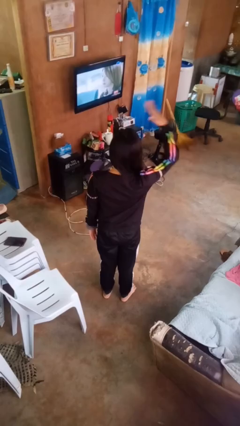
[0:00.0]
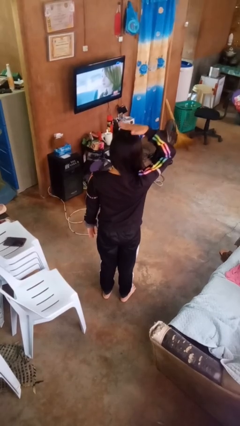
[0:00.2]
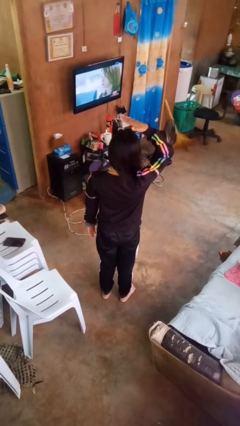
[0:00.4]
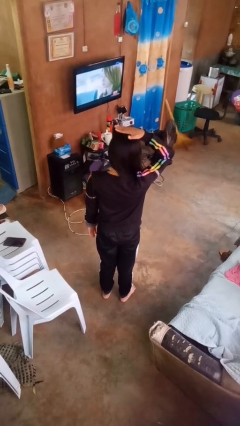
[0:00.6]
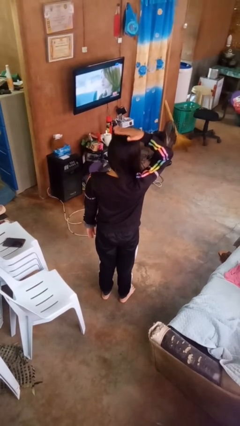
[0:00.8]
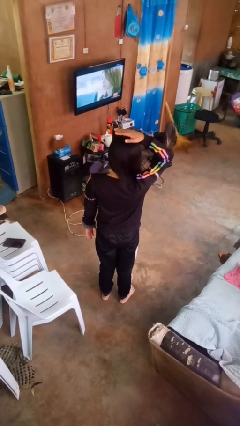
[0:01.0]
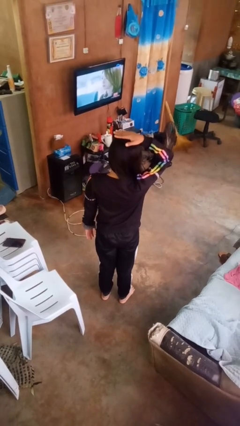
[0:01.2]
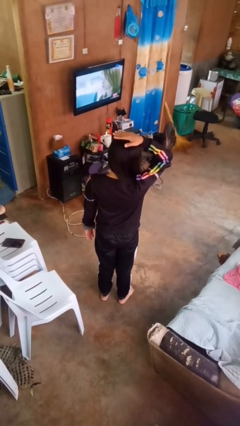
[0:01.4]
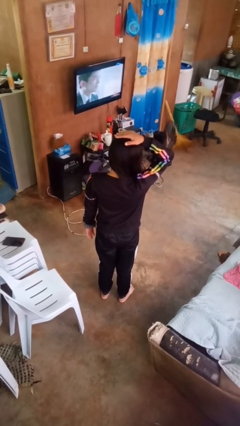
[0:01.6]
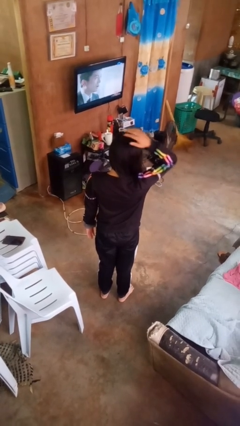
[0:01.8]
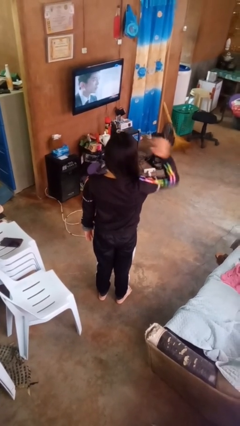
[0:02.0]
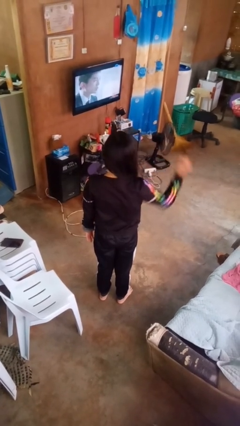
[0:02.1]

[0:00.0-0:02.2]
person pats head

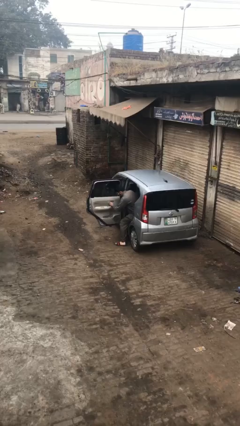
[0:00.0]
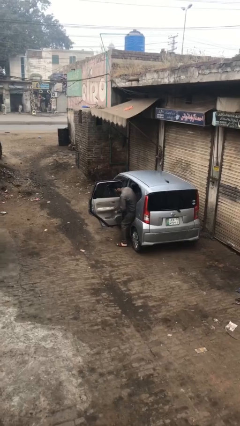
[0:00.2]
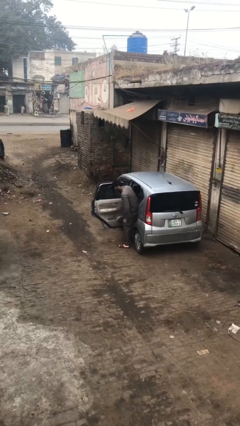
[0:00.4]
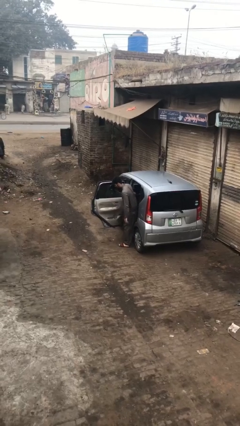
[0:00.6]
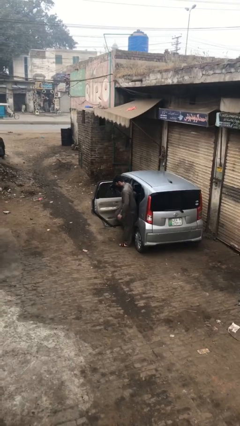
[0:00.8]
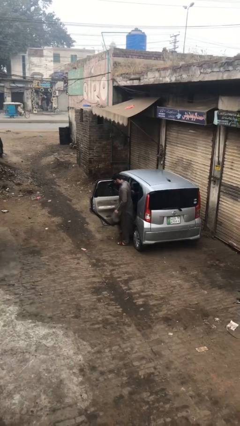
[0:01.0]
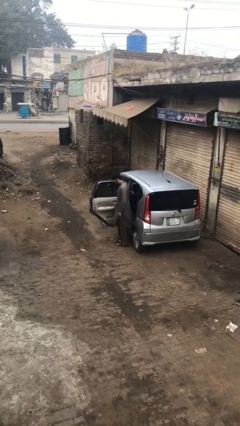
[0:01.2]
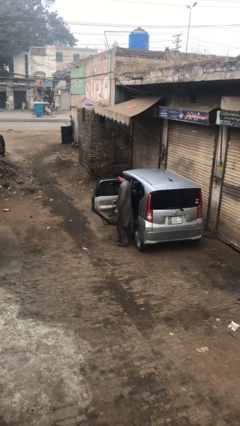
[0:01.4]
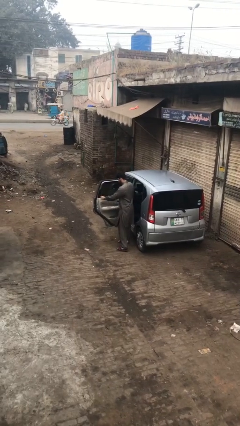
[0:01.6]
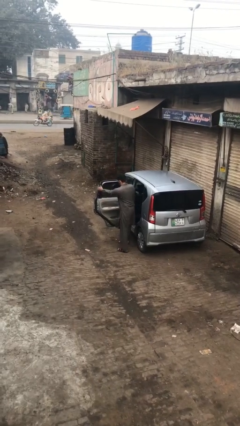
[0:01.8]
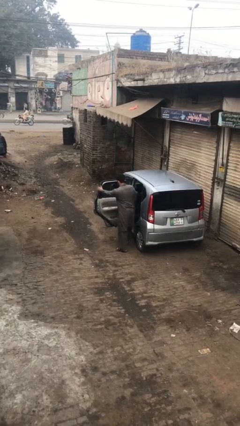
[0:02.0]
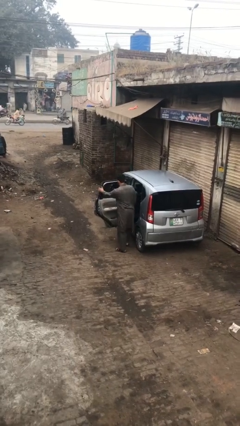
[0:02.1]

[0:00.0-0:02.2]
person exits car

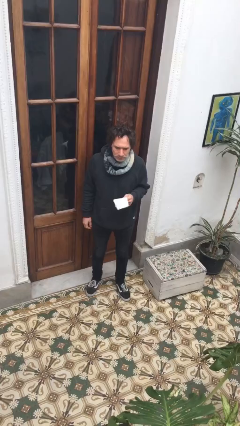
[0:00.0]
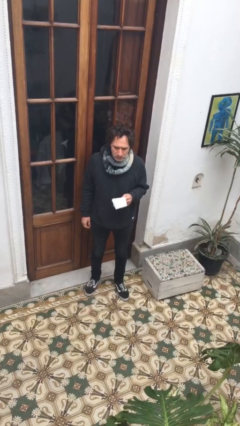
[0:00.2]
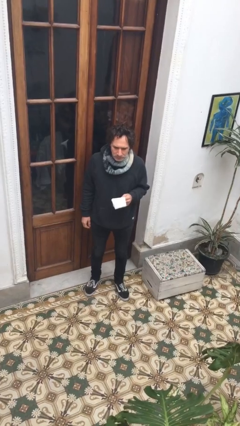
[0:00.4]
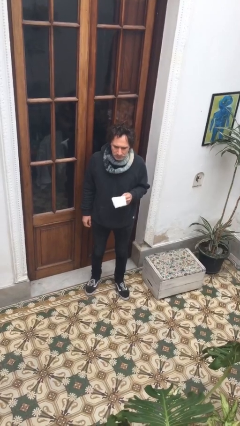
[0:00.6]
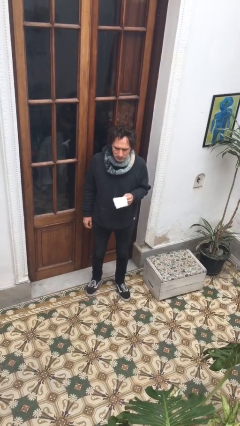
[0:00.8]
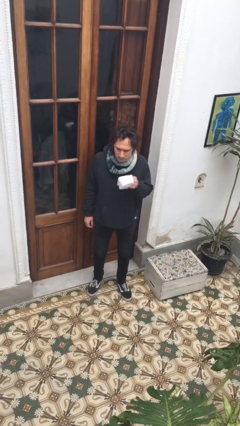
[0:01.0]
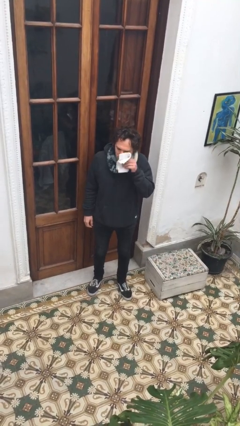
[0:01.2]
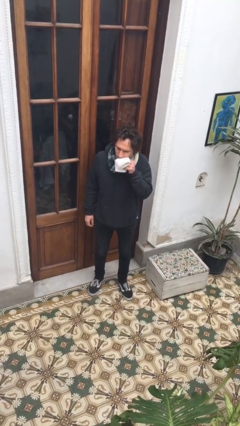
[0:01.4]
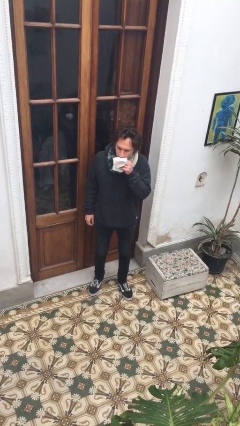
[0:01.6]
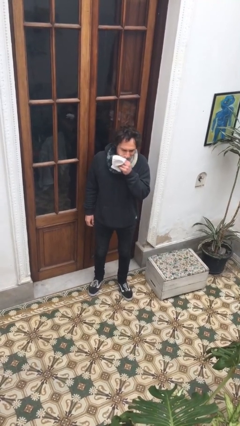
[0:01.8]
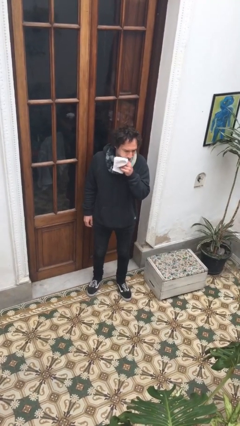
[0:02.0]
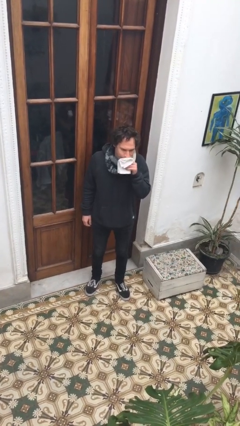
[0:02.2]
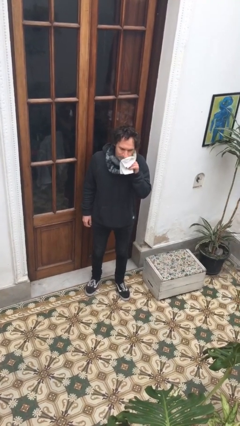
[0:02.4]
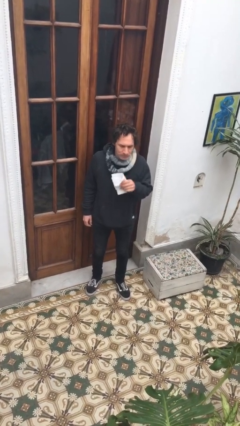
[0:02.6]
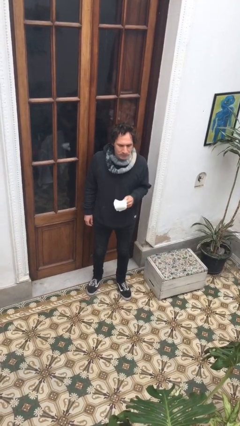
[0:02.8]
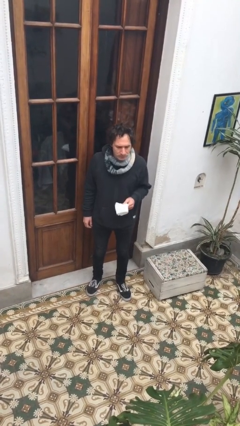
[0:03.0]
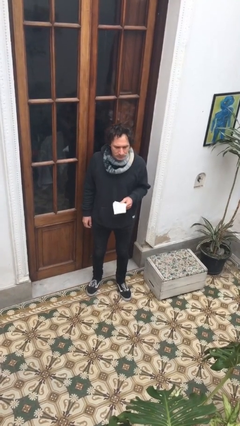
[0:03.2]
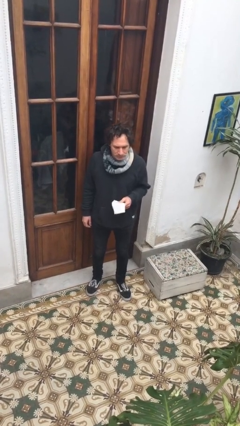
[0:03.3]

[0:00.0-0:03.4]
person wipes mouth with napkin

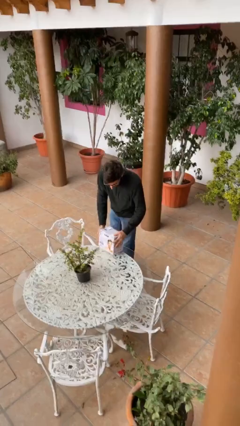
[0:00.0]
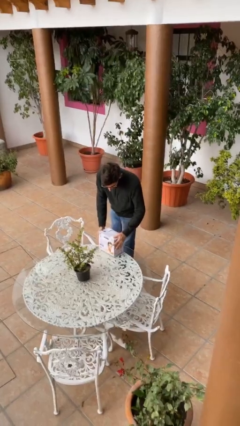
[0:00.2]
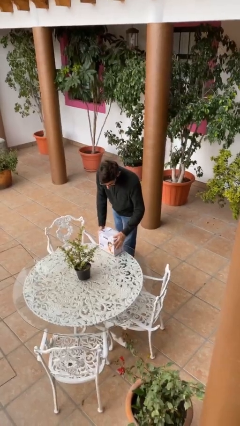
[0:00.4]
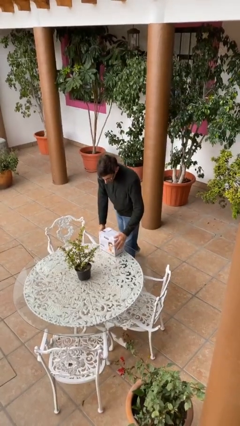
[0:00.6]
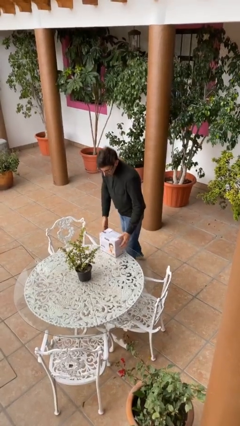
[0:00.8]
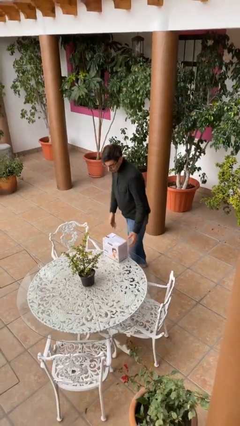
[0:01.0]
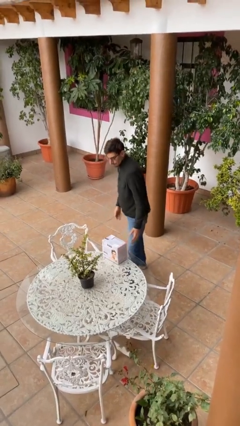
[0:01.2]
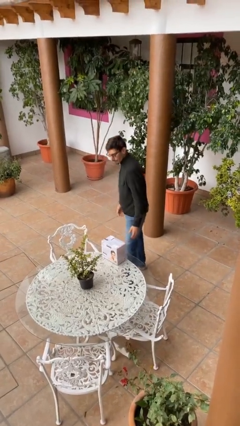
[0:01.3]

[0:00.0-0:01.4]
person puts down object on table

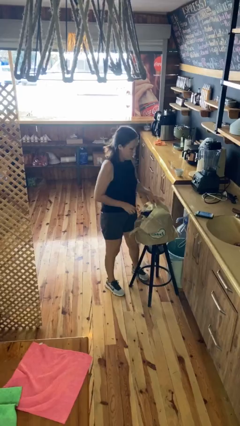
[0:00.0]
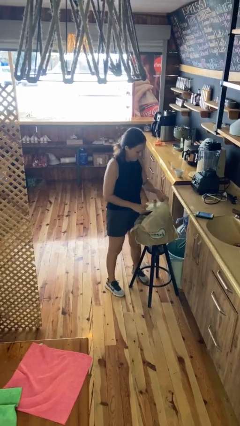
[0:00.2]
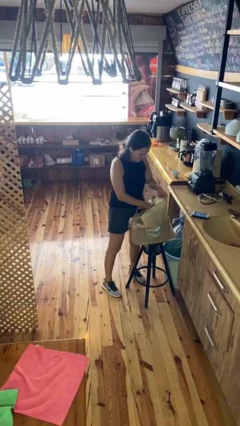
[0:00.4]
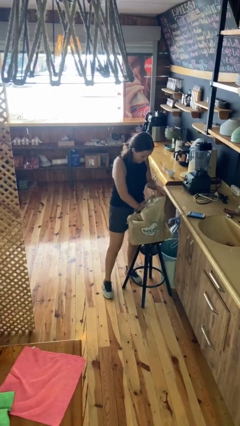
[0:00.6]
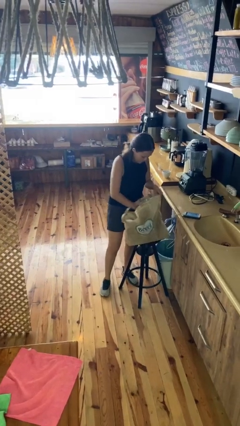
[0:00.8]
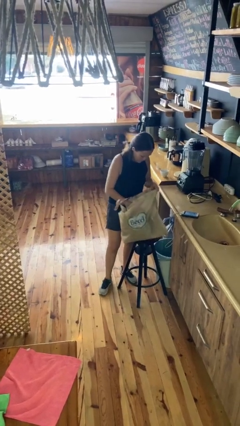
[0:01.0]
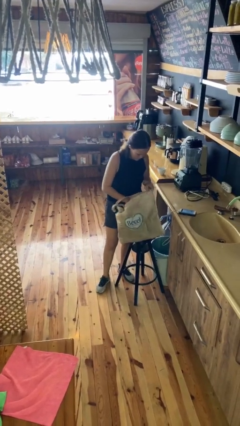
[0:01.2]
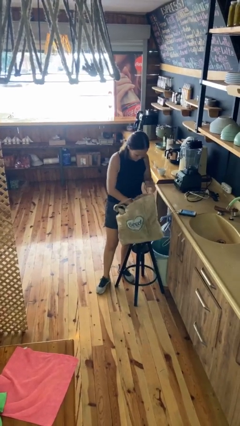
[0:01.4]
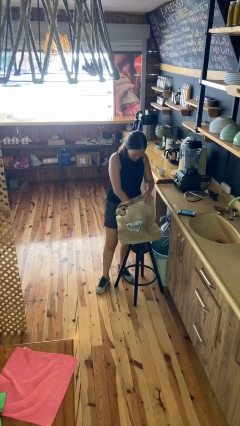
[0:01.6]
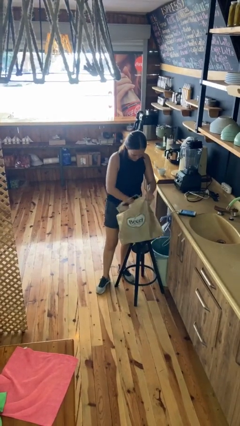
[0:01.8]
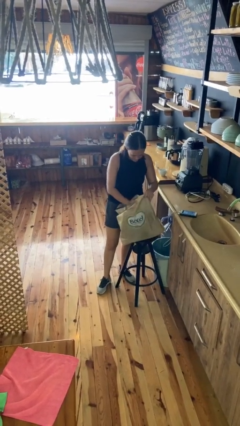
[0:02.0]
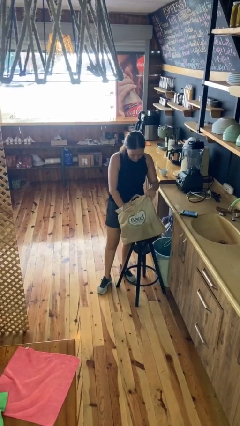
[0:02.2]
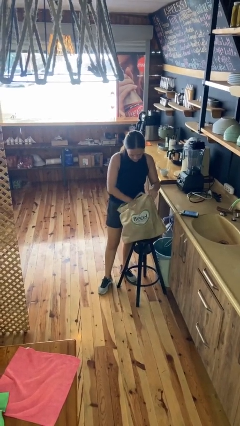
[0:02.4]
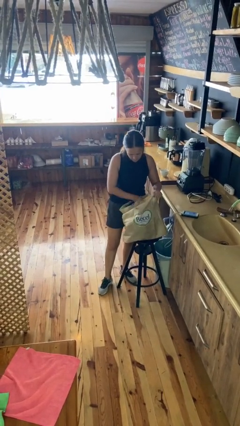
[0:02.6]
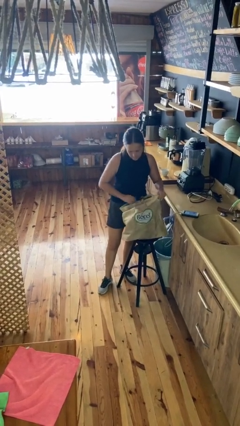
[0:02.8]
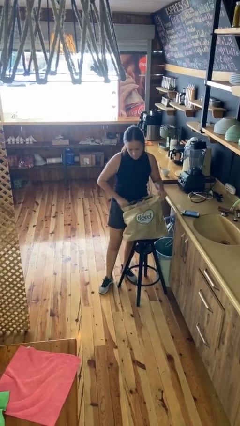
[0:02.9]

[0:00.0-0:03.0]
person searches in bag

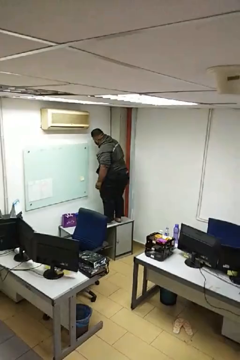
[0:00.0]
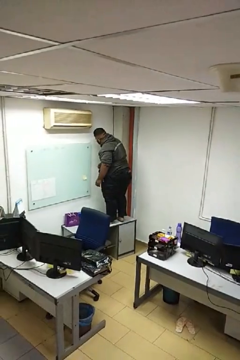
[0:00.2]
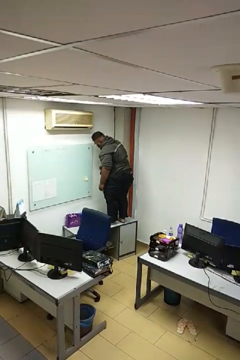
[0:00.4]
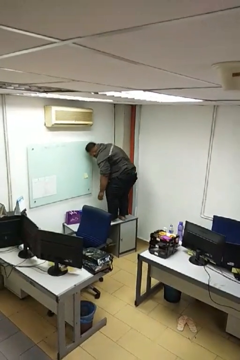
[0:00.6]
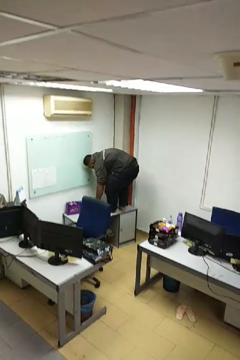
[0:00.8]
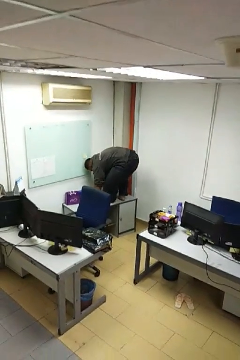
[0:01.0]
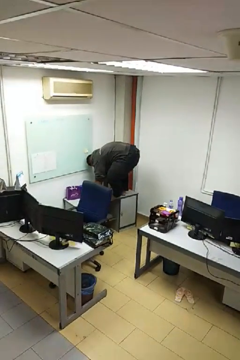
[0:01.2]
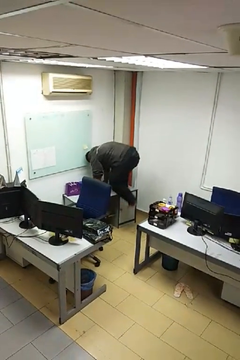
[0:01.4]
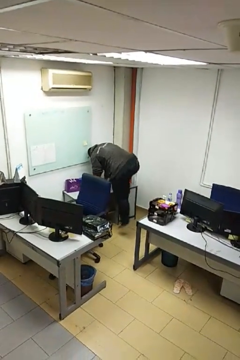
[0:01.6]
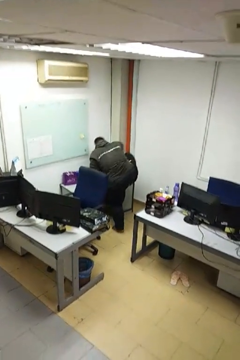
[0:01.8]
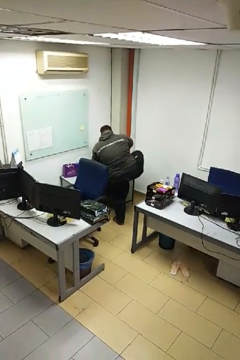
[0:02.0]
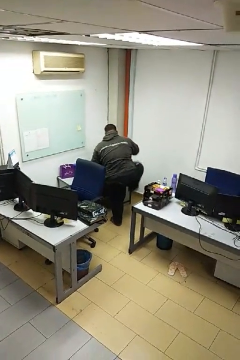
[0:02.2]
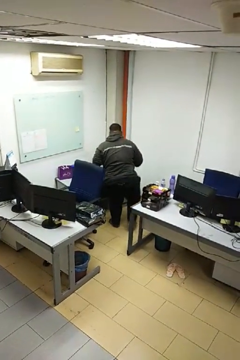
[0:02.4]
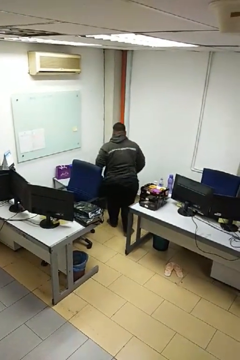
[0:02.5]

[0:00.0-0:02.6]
person climbs off table

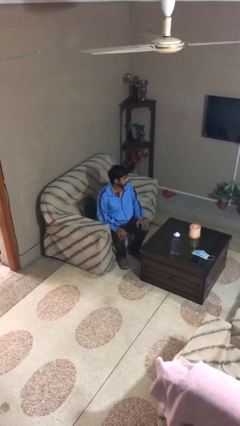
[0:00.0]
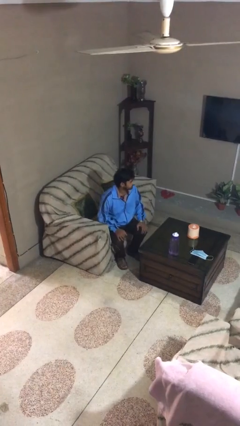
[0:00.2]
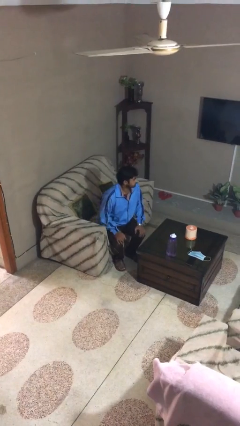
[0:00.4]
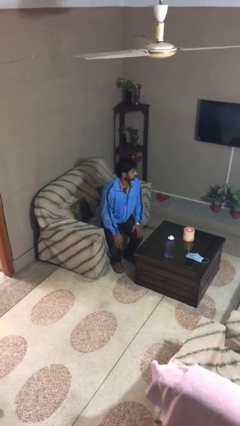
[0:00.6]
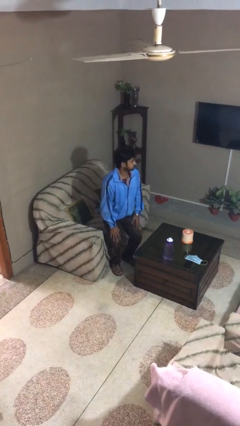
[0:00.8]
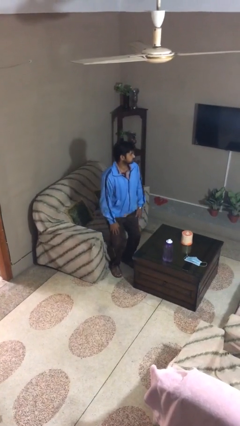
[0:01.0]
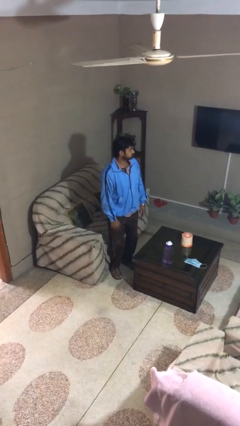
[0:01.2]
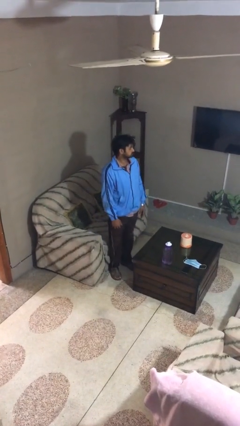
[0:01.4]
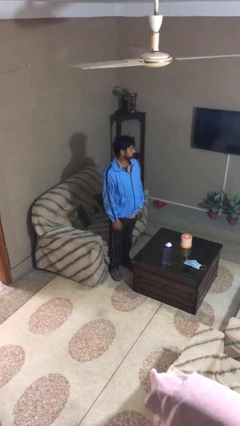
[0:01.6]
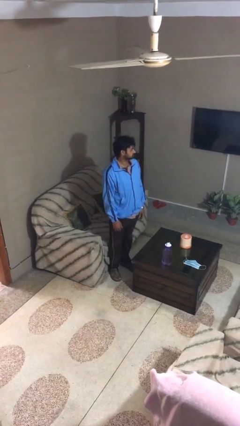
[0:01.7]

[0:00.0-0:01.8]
person stands up

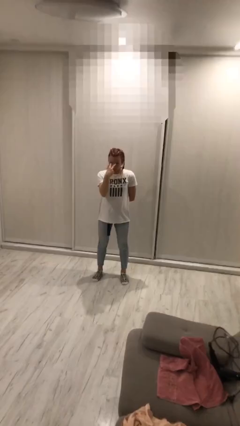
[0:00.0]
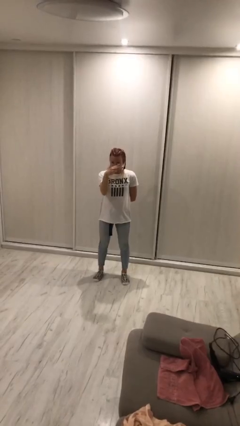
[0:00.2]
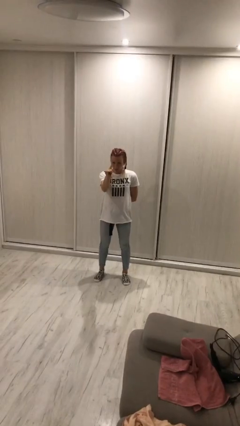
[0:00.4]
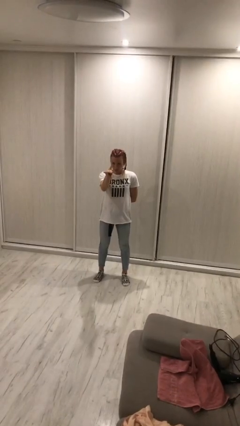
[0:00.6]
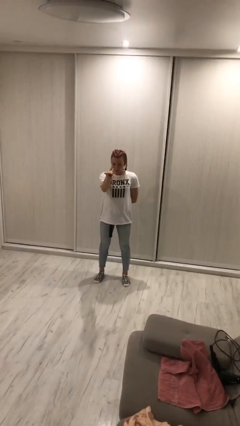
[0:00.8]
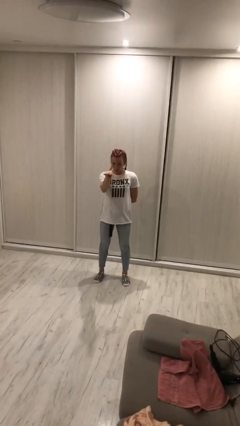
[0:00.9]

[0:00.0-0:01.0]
person gestures watch closely
